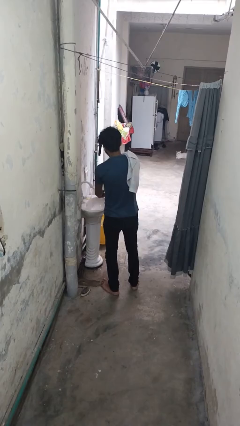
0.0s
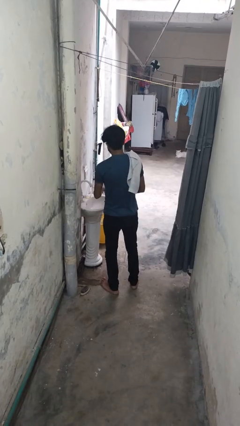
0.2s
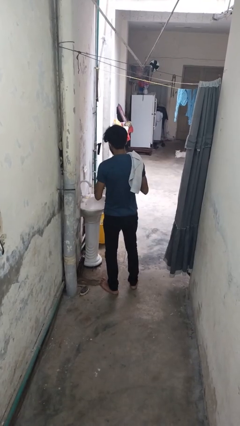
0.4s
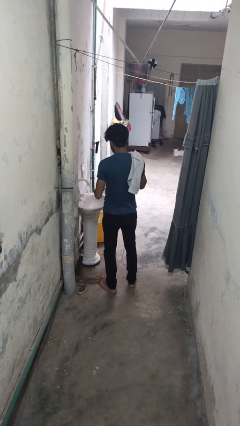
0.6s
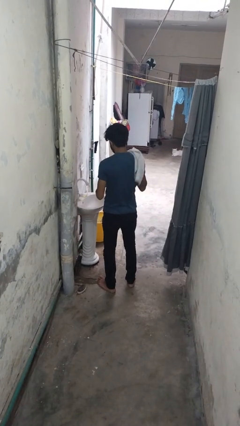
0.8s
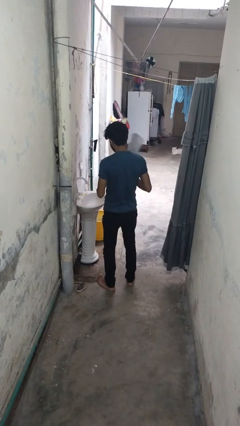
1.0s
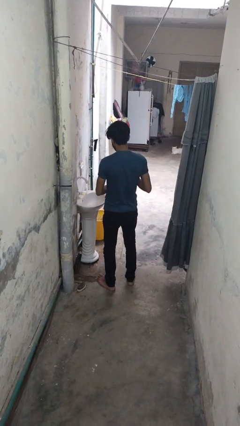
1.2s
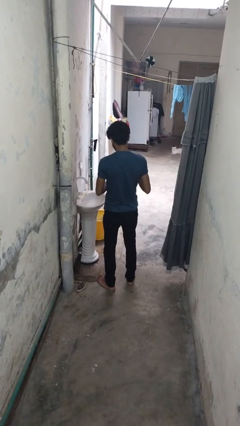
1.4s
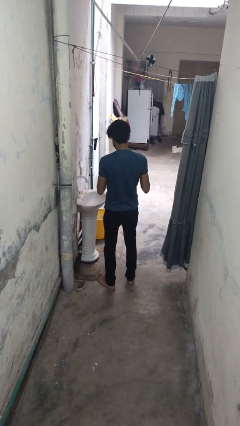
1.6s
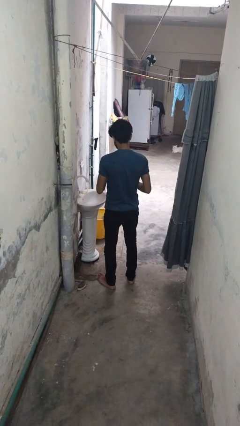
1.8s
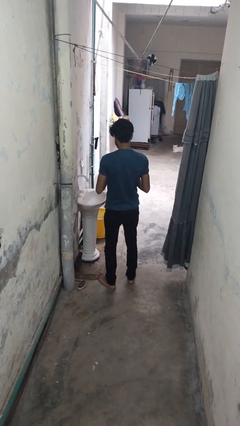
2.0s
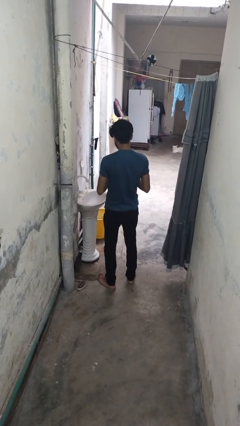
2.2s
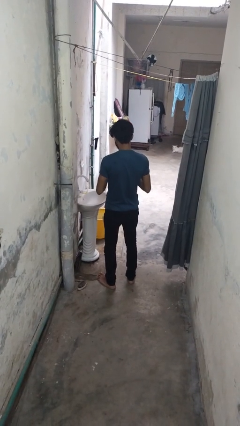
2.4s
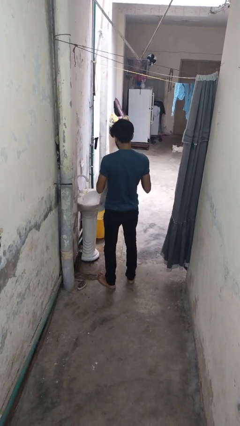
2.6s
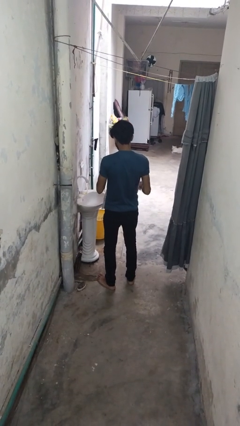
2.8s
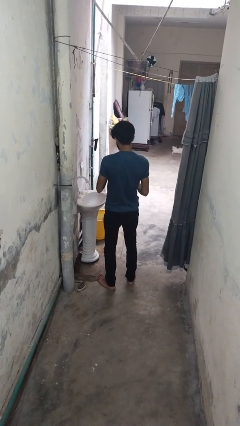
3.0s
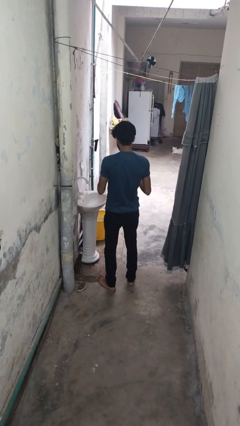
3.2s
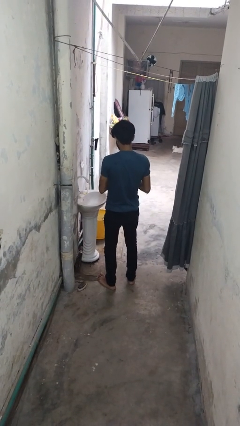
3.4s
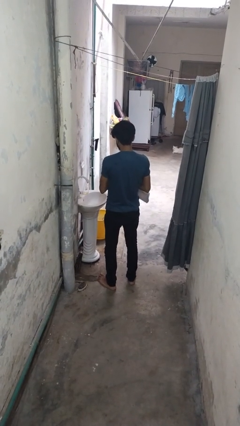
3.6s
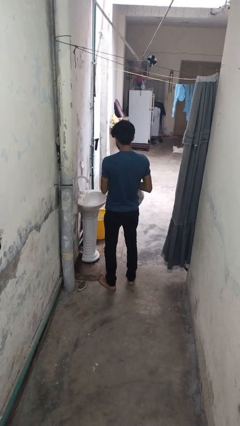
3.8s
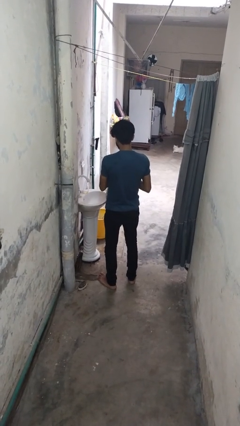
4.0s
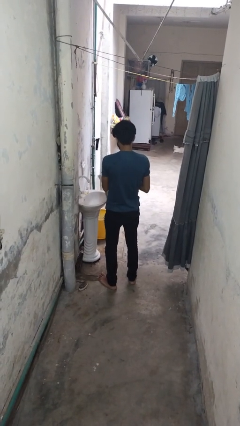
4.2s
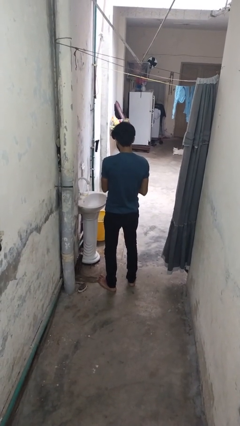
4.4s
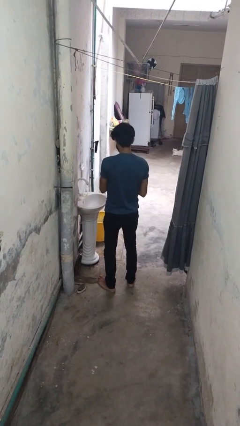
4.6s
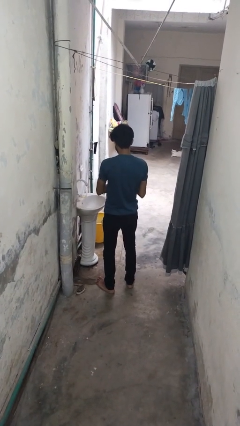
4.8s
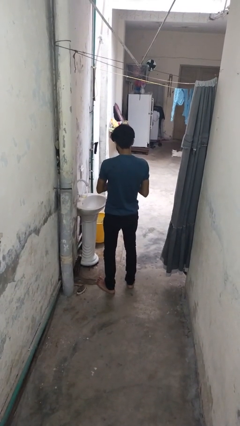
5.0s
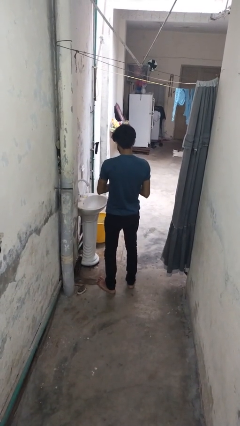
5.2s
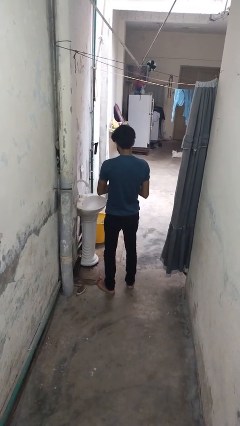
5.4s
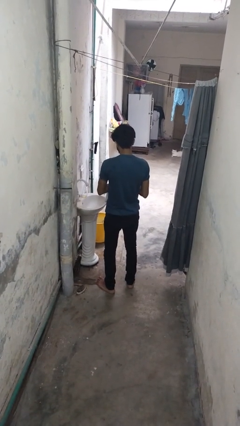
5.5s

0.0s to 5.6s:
person dries hands with towel

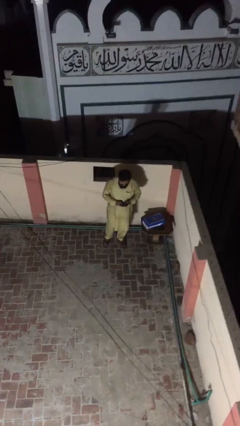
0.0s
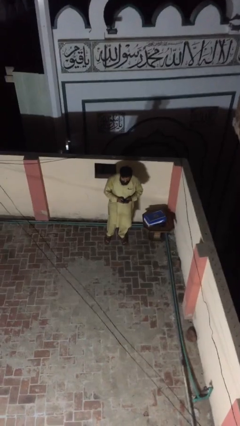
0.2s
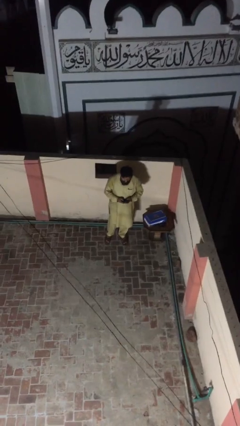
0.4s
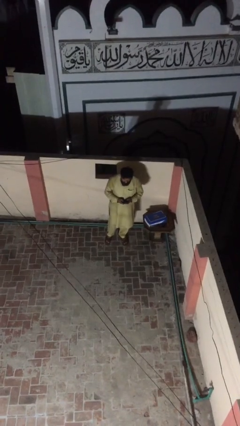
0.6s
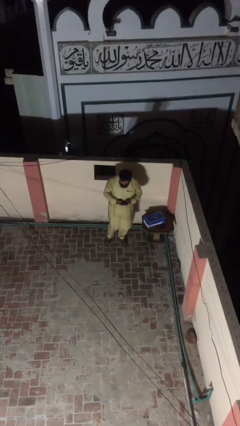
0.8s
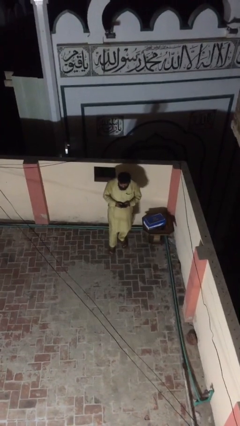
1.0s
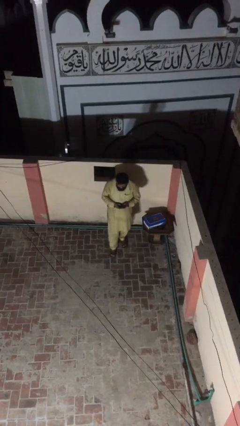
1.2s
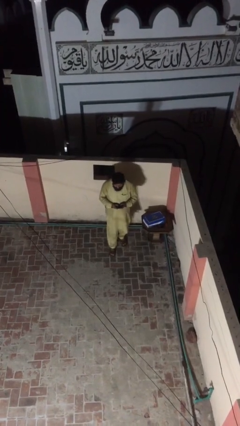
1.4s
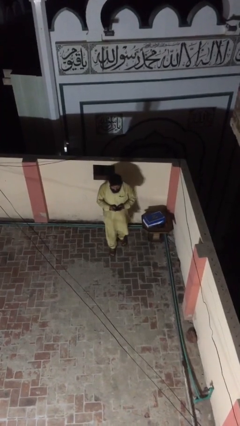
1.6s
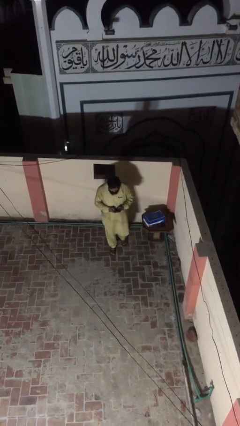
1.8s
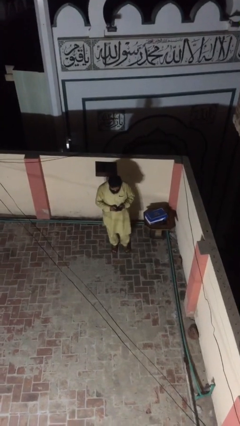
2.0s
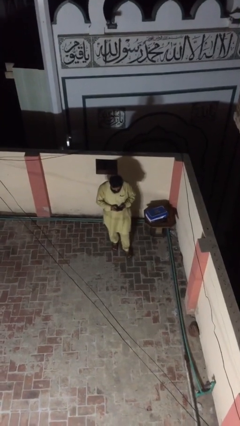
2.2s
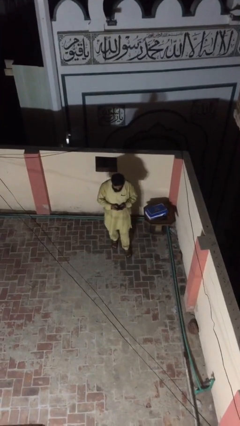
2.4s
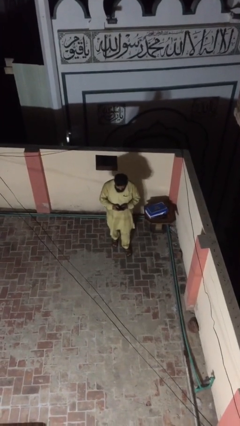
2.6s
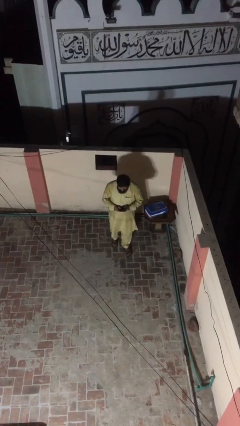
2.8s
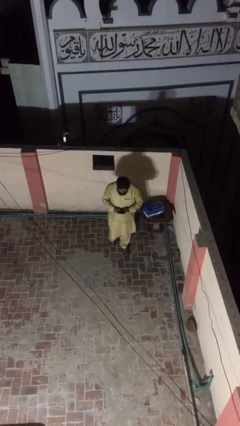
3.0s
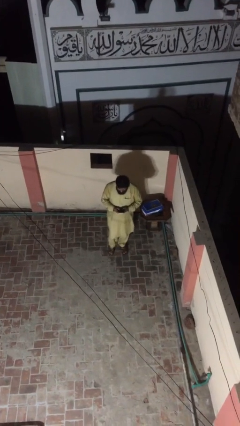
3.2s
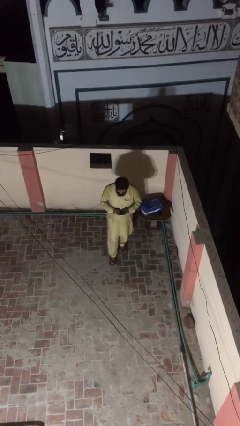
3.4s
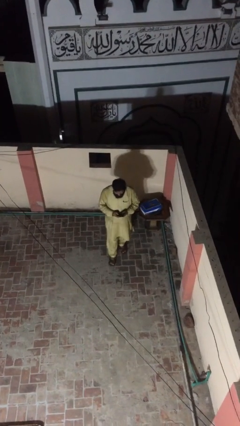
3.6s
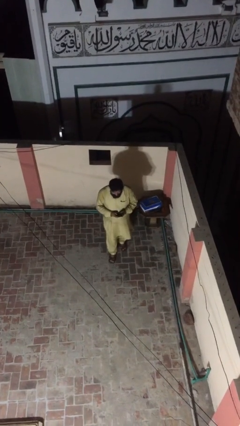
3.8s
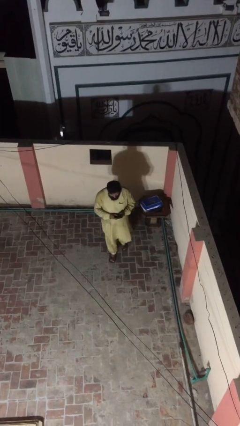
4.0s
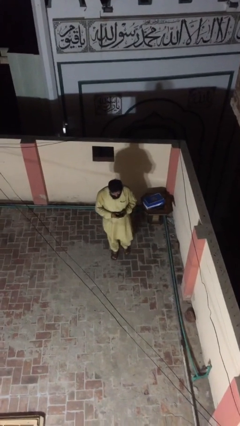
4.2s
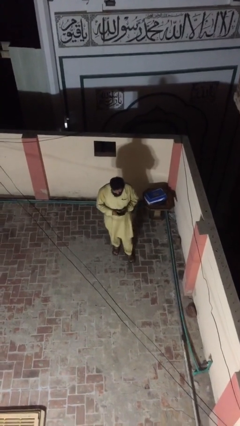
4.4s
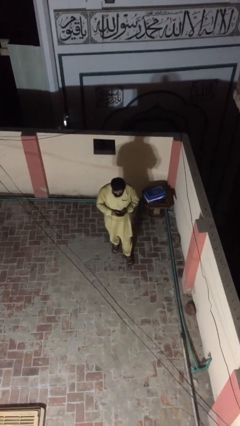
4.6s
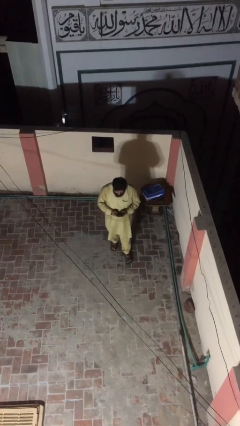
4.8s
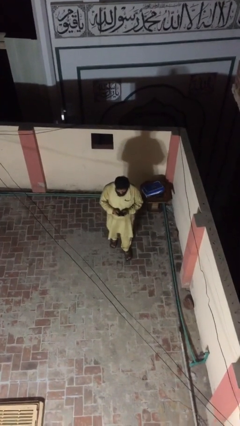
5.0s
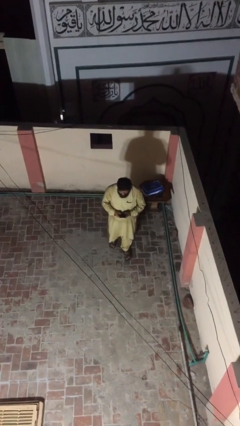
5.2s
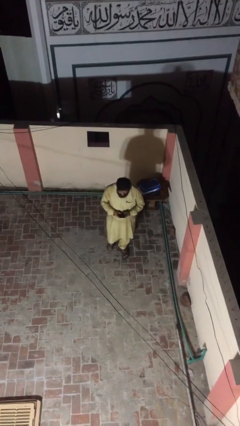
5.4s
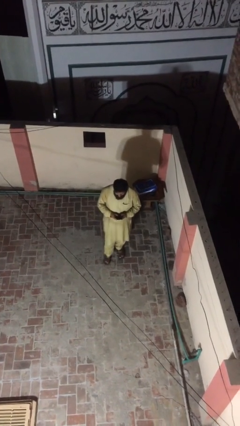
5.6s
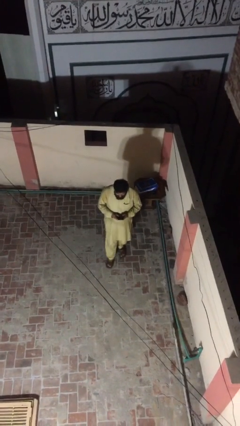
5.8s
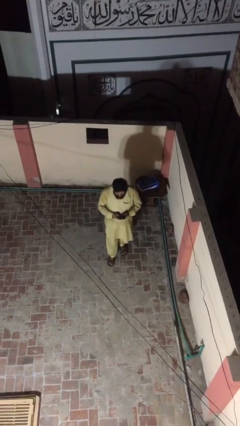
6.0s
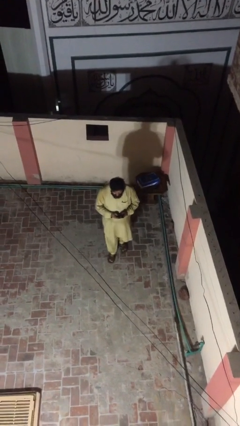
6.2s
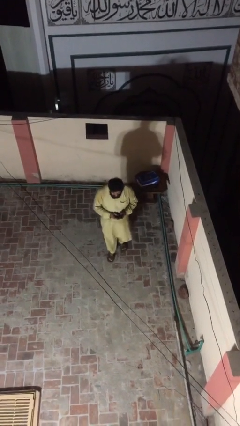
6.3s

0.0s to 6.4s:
person texts on phone

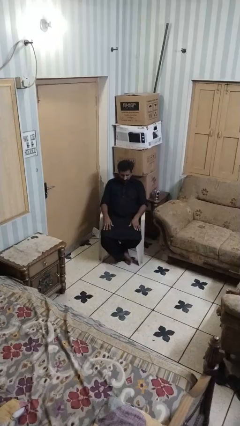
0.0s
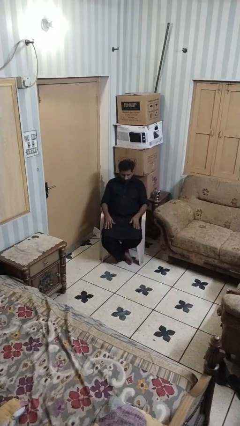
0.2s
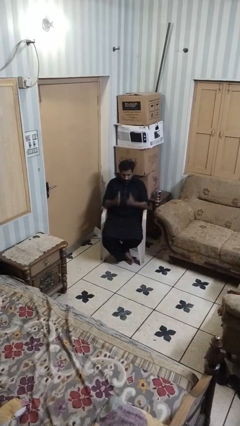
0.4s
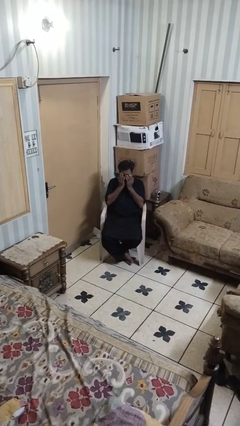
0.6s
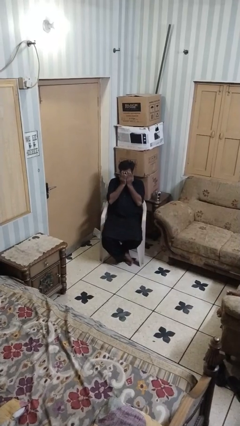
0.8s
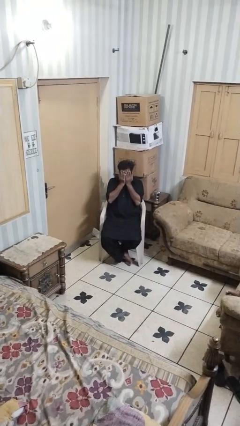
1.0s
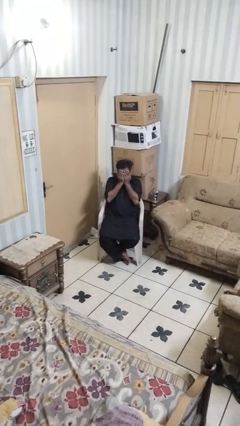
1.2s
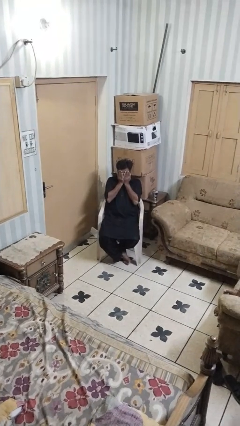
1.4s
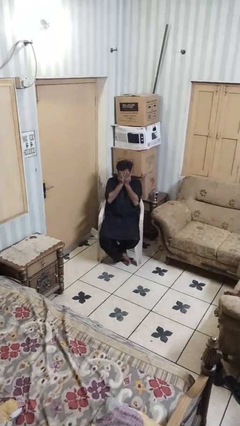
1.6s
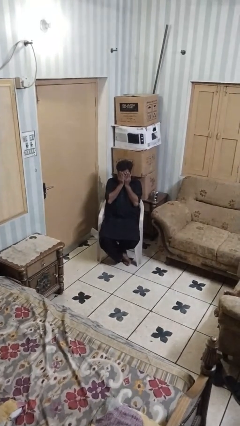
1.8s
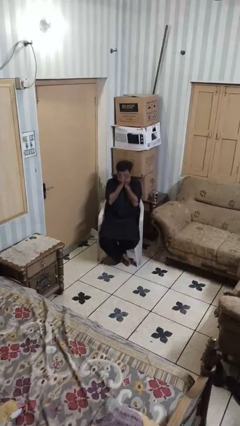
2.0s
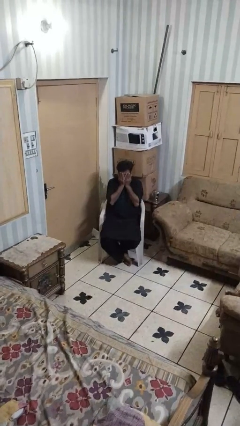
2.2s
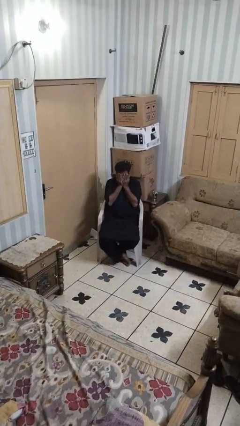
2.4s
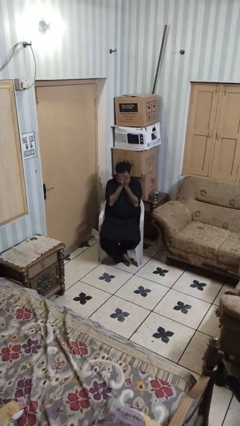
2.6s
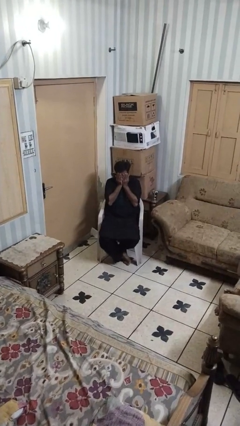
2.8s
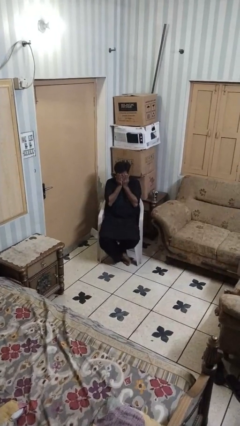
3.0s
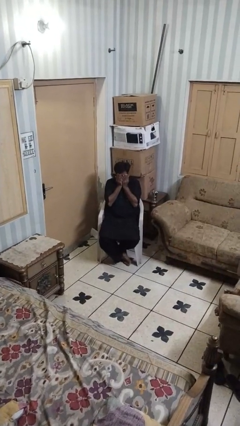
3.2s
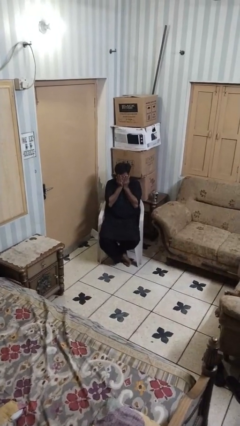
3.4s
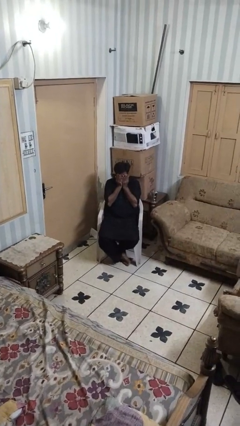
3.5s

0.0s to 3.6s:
person covers face with hands

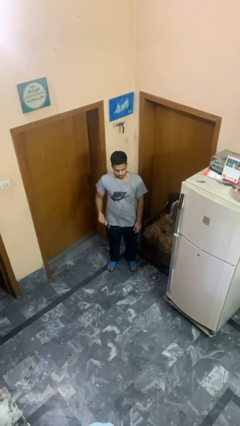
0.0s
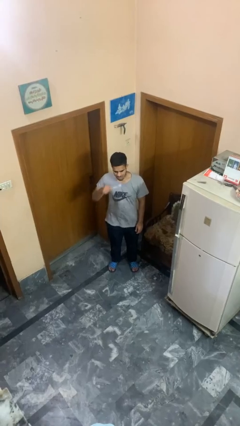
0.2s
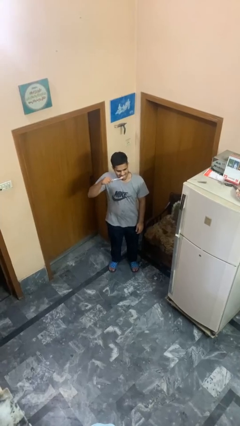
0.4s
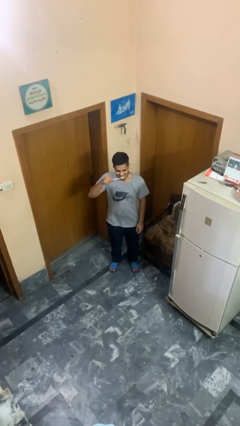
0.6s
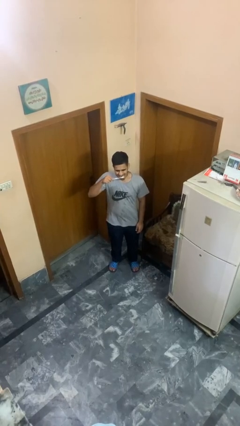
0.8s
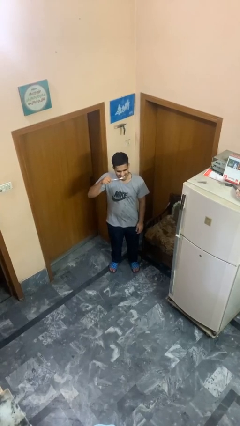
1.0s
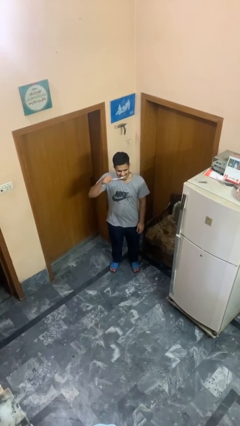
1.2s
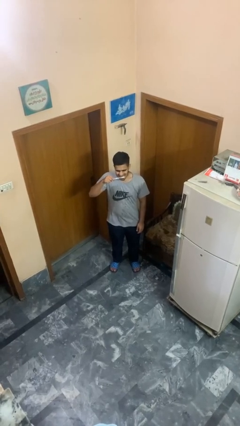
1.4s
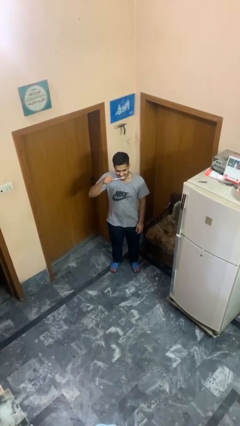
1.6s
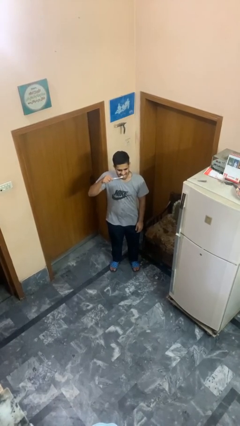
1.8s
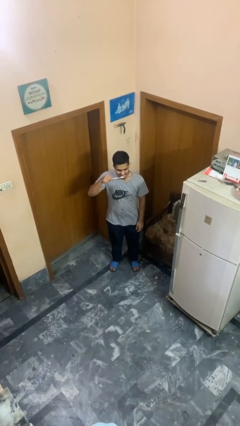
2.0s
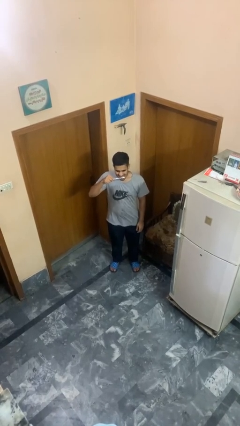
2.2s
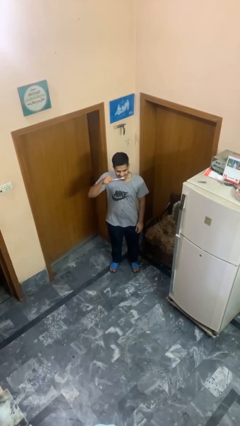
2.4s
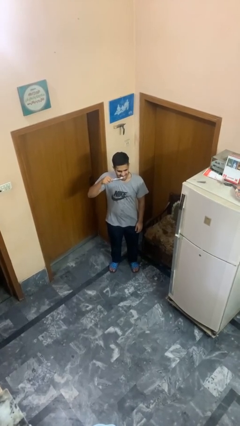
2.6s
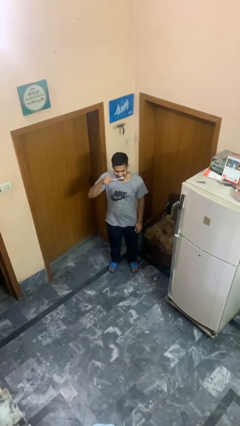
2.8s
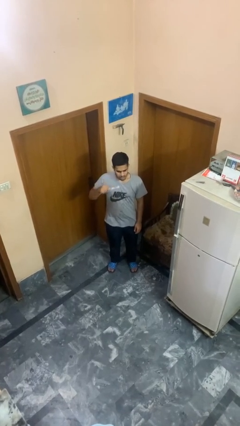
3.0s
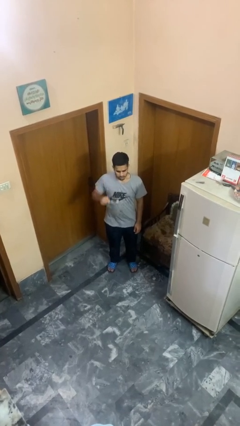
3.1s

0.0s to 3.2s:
person brushes teeth
